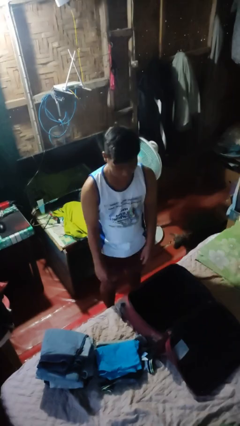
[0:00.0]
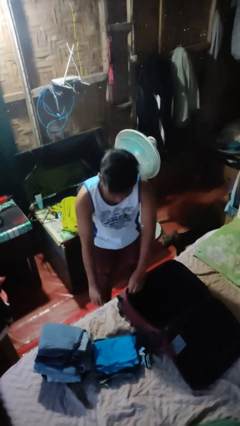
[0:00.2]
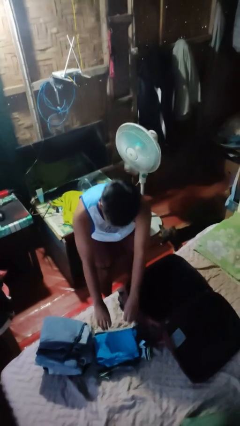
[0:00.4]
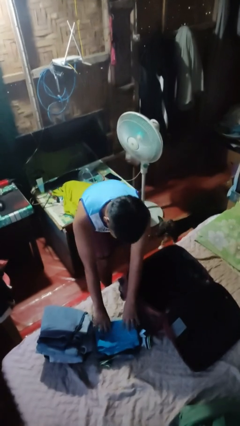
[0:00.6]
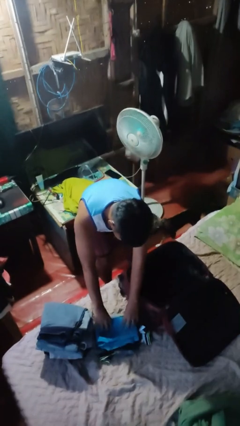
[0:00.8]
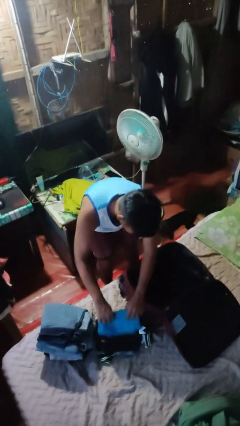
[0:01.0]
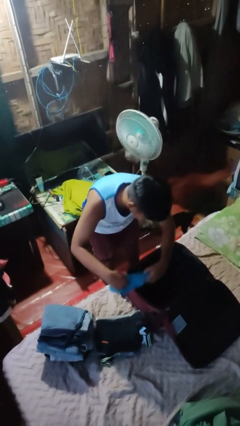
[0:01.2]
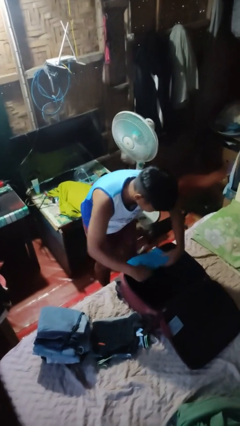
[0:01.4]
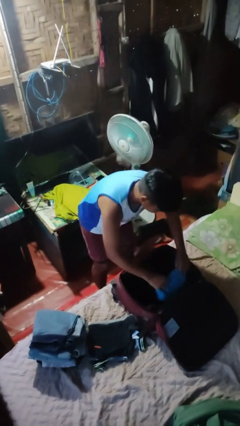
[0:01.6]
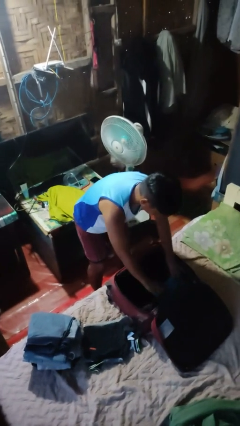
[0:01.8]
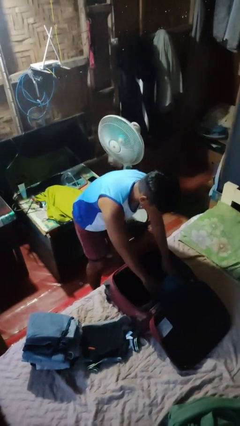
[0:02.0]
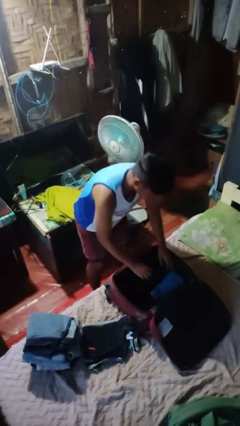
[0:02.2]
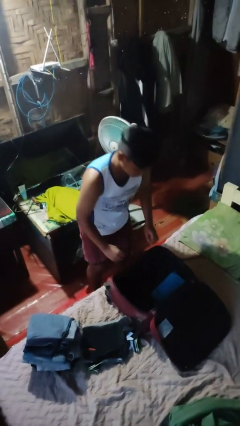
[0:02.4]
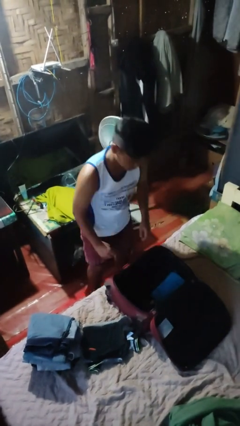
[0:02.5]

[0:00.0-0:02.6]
person loads clothes into suitcase

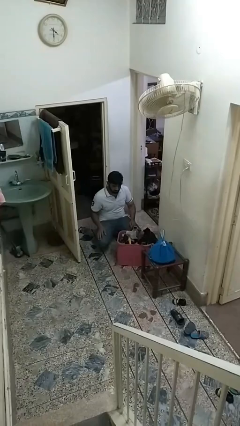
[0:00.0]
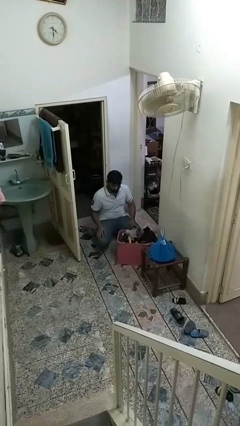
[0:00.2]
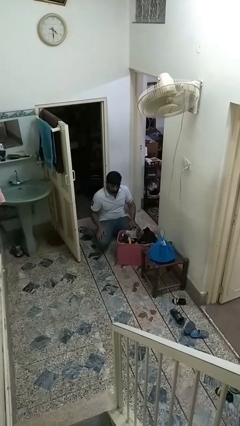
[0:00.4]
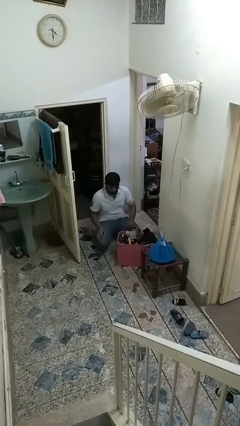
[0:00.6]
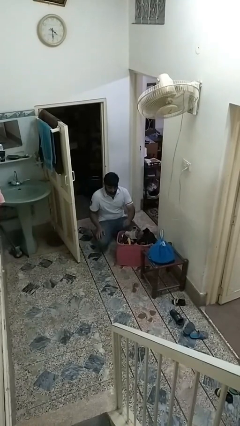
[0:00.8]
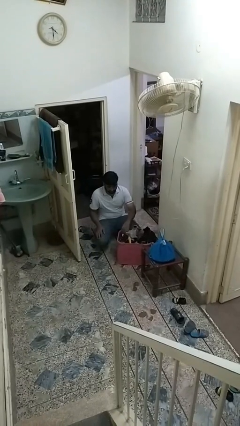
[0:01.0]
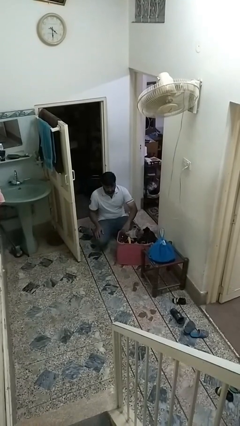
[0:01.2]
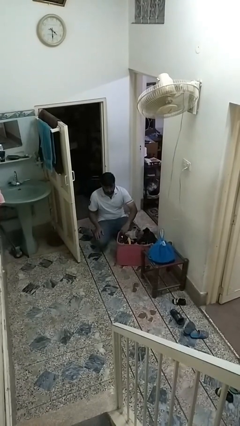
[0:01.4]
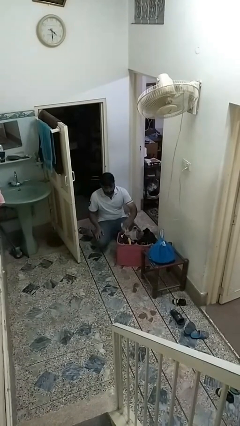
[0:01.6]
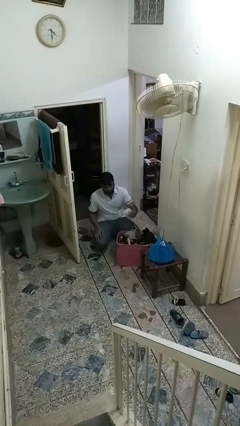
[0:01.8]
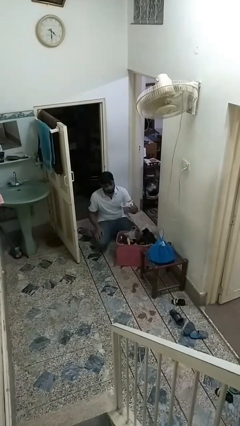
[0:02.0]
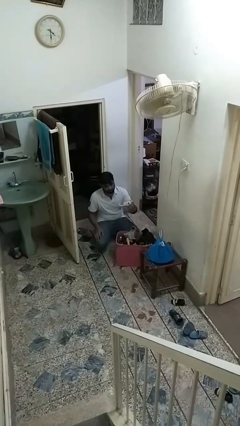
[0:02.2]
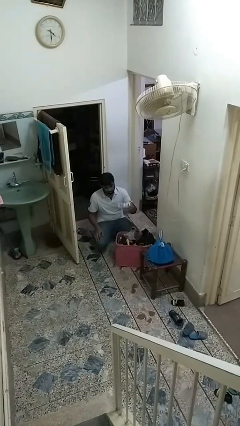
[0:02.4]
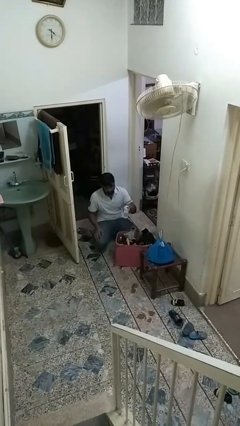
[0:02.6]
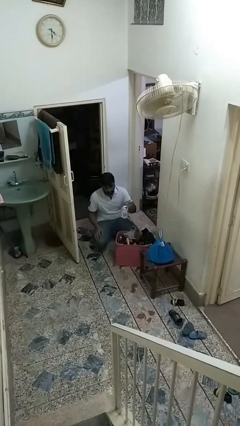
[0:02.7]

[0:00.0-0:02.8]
person takes object from basket

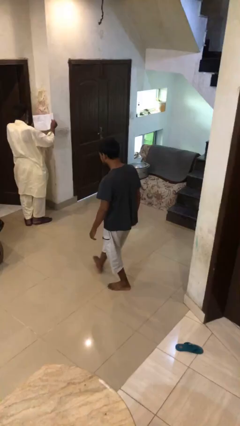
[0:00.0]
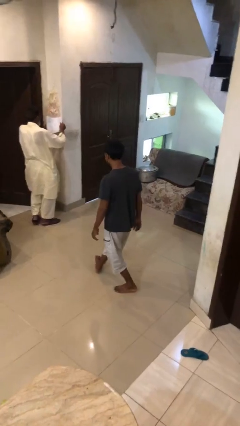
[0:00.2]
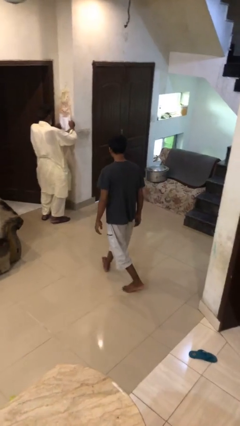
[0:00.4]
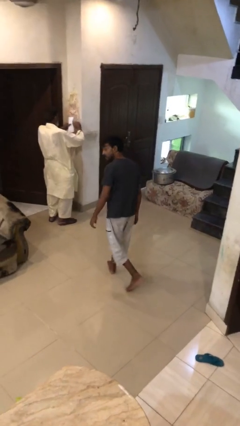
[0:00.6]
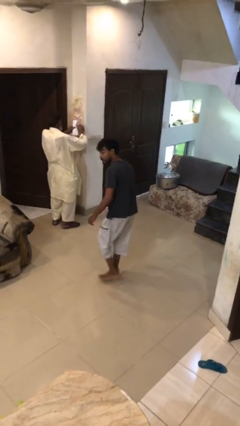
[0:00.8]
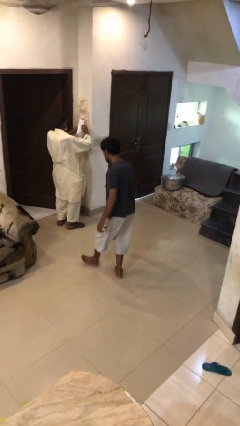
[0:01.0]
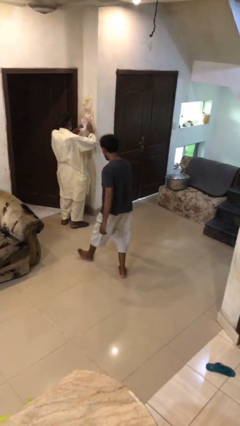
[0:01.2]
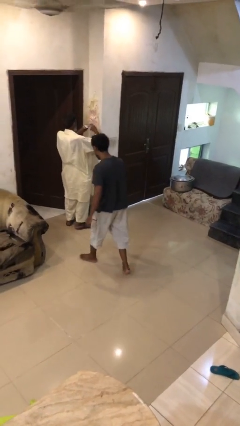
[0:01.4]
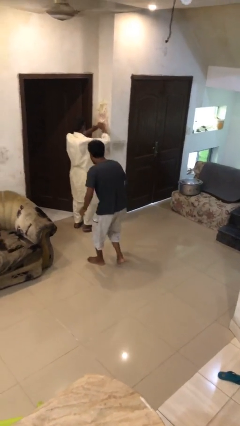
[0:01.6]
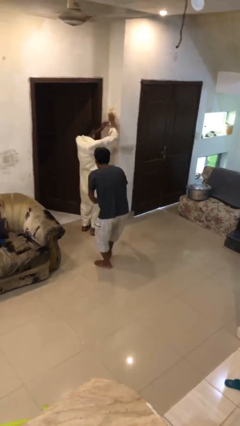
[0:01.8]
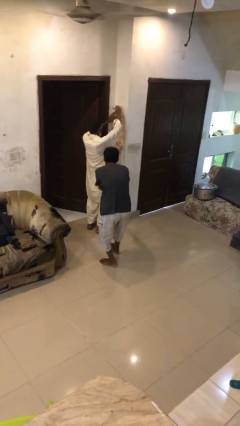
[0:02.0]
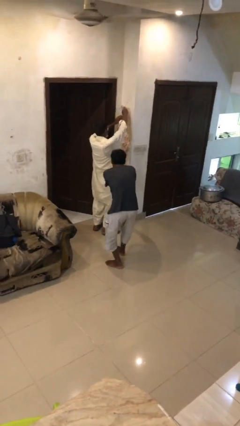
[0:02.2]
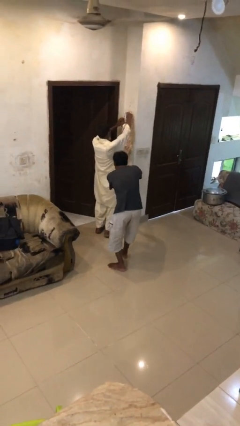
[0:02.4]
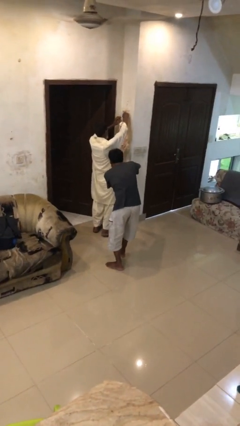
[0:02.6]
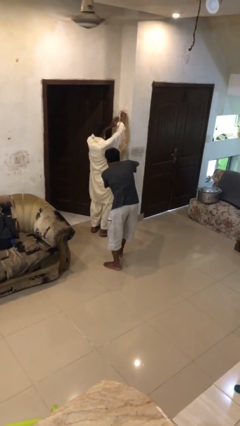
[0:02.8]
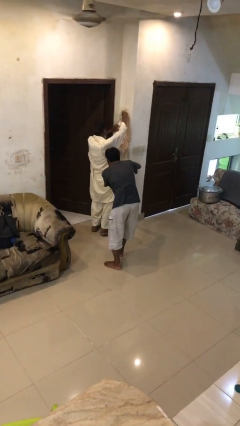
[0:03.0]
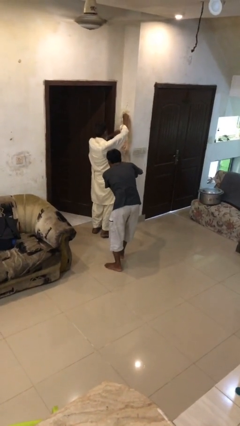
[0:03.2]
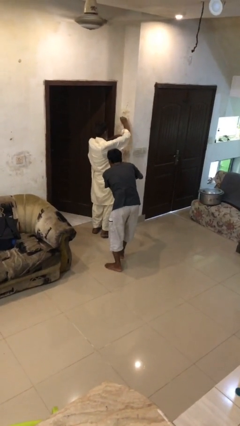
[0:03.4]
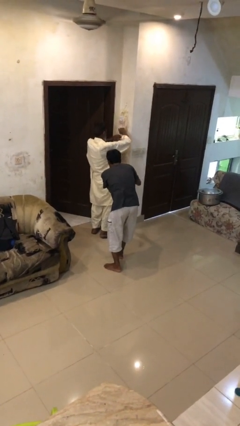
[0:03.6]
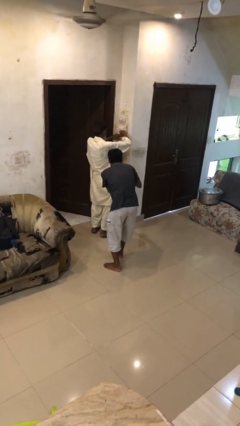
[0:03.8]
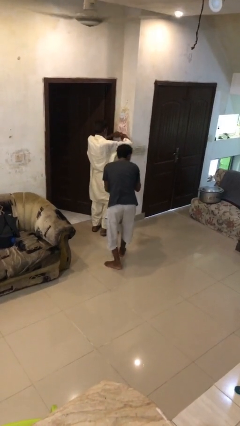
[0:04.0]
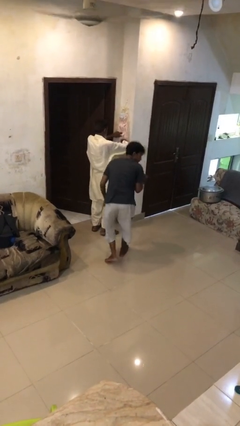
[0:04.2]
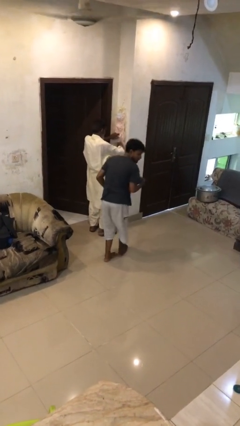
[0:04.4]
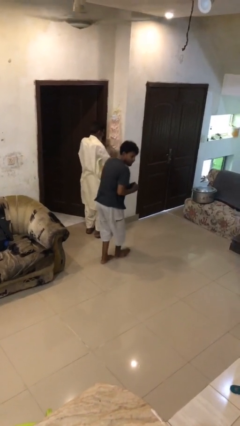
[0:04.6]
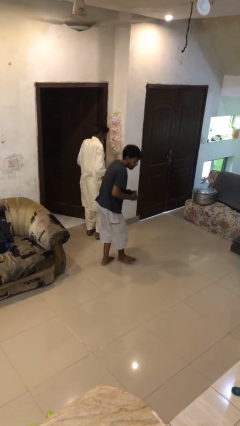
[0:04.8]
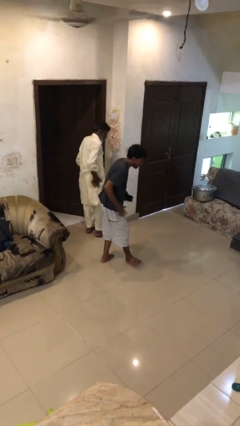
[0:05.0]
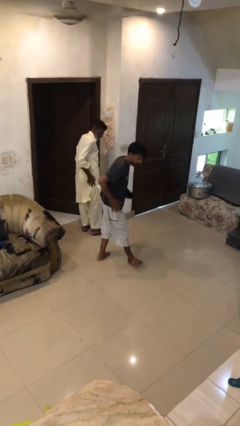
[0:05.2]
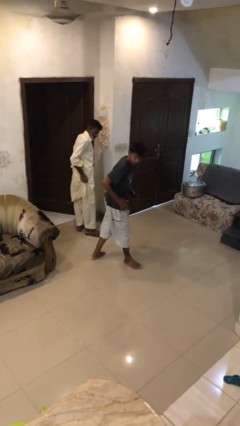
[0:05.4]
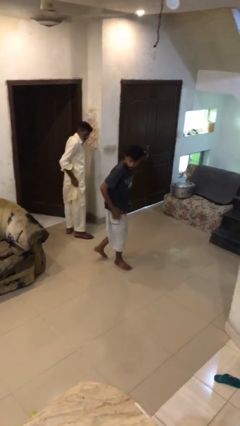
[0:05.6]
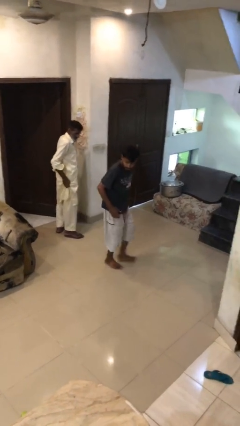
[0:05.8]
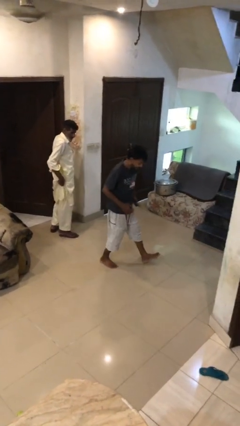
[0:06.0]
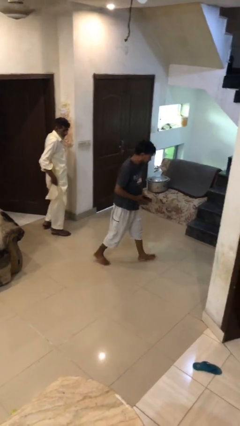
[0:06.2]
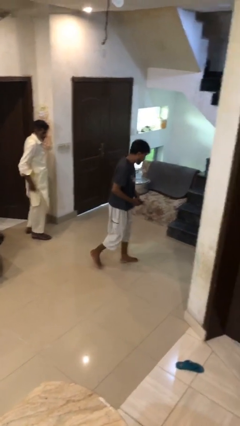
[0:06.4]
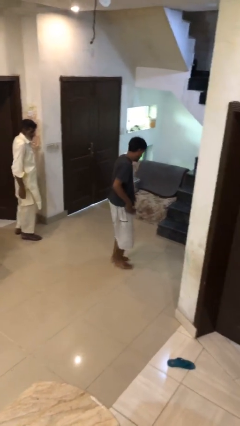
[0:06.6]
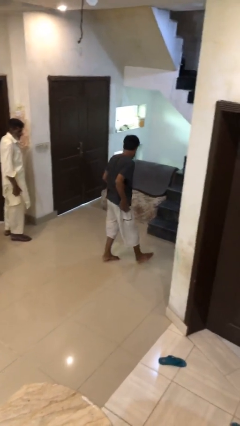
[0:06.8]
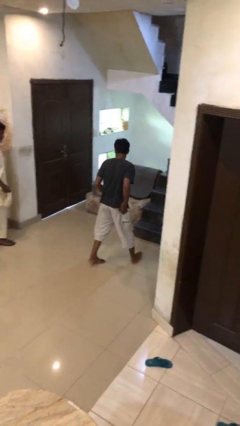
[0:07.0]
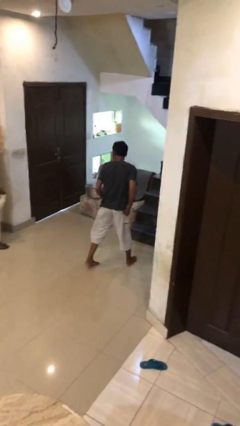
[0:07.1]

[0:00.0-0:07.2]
person steals object from person

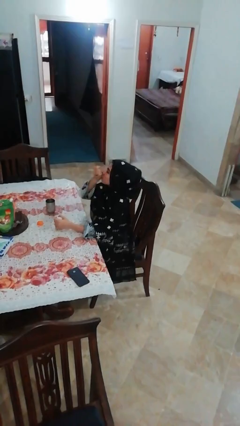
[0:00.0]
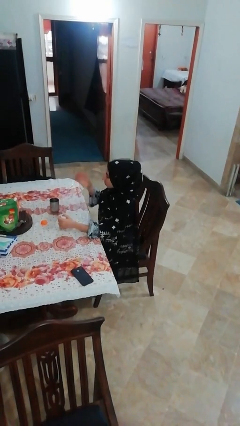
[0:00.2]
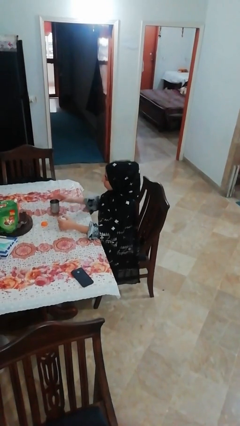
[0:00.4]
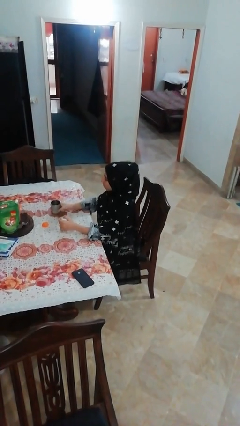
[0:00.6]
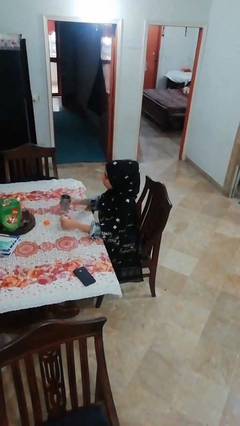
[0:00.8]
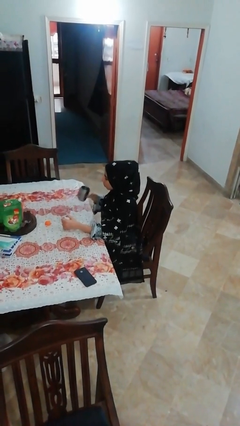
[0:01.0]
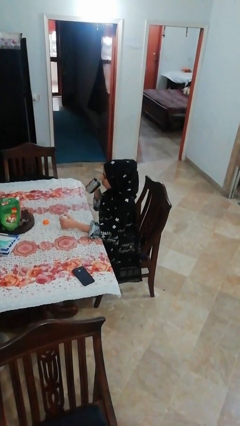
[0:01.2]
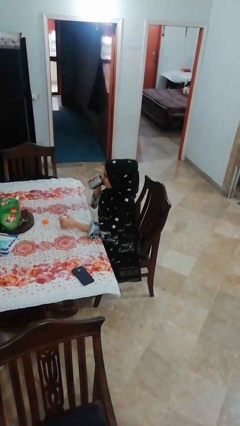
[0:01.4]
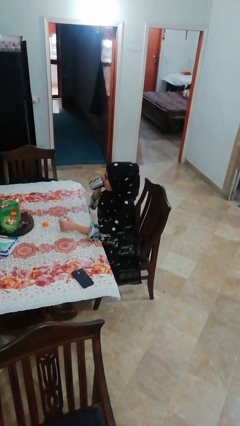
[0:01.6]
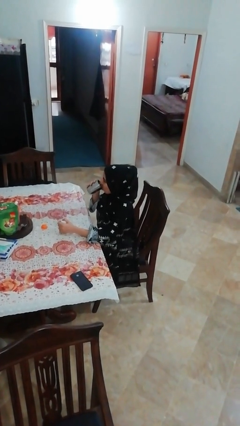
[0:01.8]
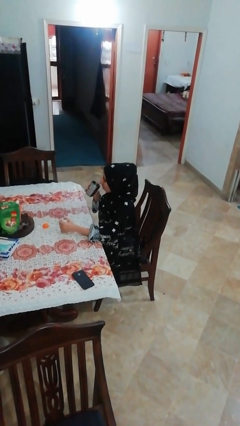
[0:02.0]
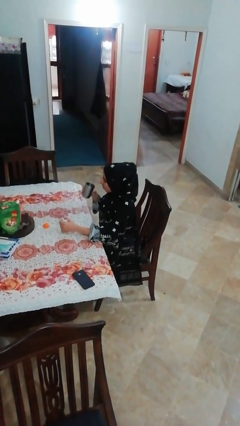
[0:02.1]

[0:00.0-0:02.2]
person drinks from cup

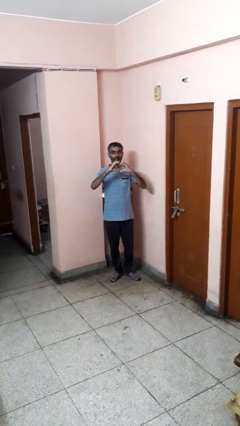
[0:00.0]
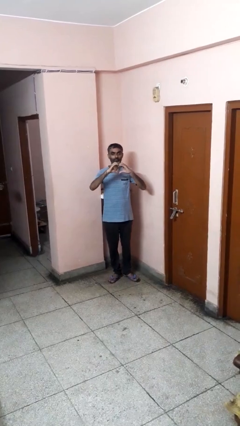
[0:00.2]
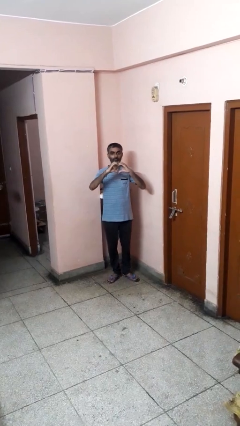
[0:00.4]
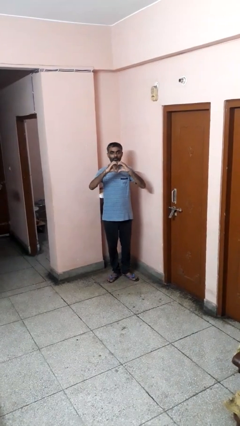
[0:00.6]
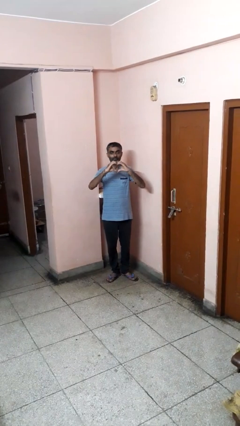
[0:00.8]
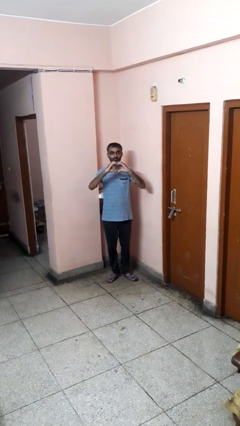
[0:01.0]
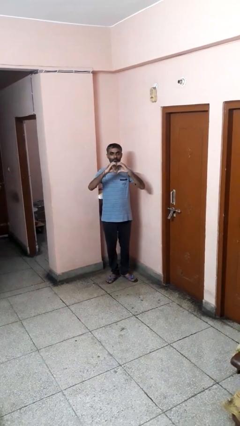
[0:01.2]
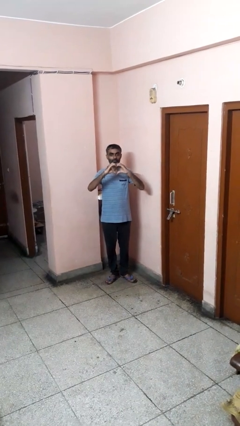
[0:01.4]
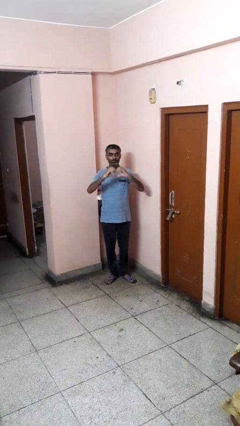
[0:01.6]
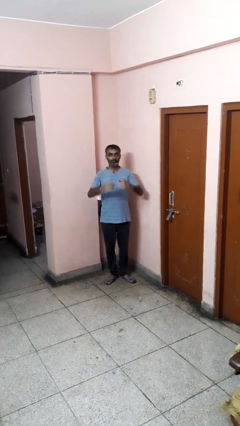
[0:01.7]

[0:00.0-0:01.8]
person gestures heart

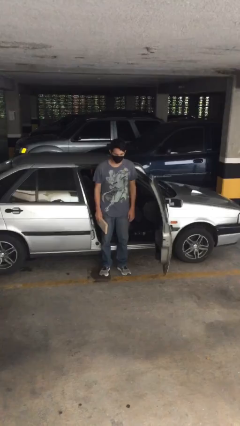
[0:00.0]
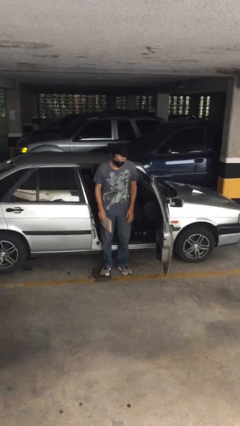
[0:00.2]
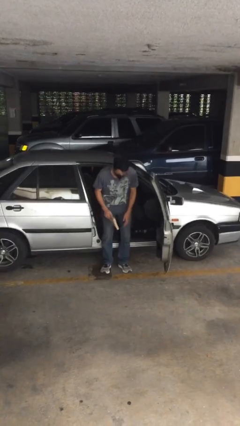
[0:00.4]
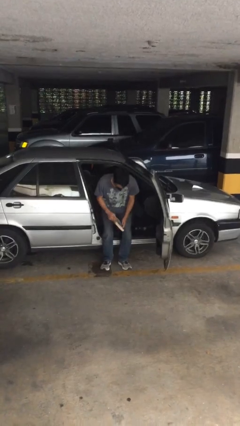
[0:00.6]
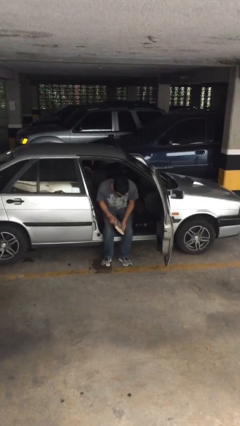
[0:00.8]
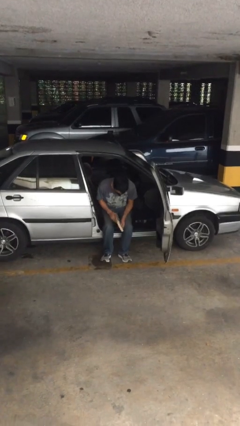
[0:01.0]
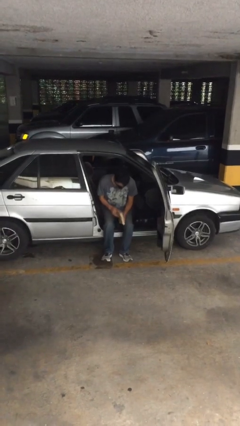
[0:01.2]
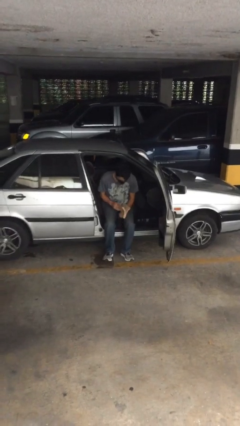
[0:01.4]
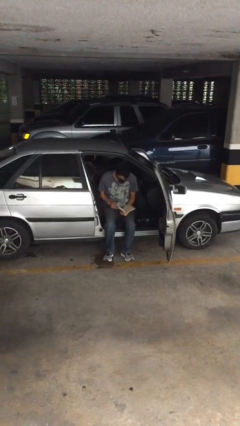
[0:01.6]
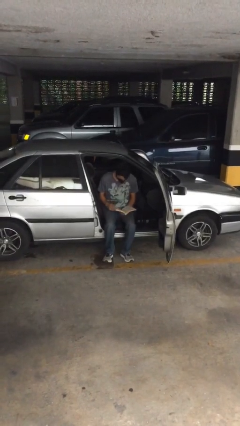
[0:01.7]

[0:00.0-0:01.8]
person sits down
